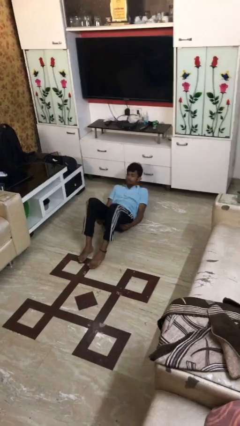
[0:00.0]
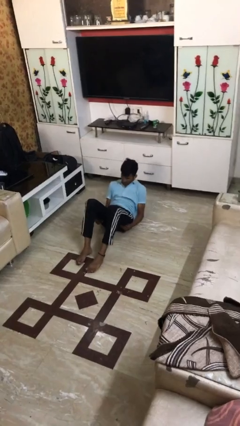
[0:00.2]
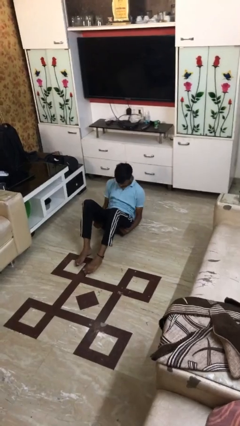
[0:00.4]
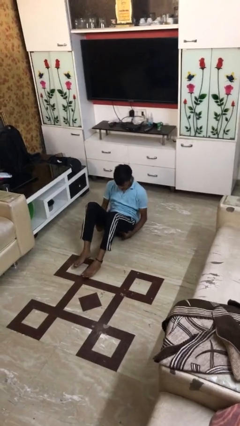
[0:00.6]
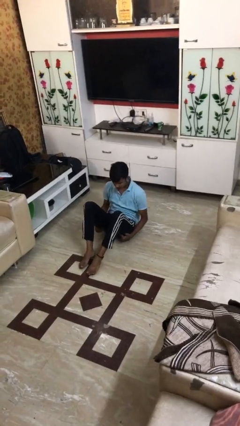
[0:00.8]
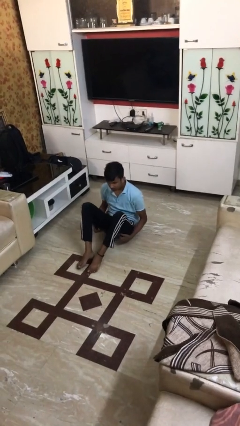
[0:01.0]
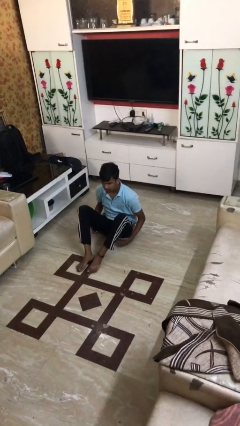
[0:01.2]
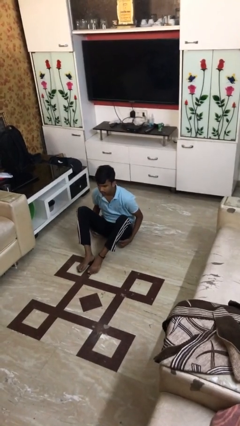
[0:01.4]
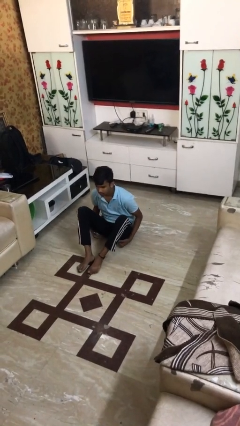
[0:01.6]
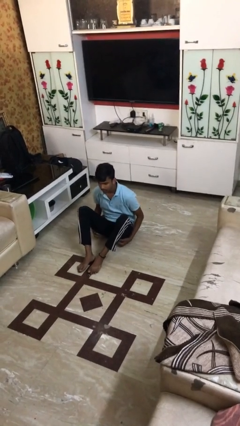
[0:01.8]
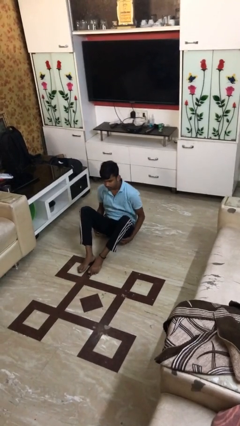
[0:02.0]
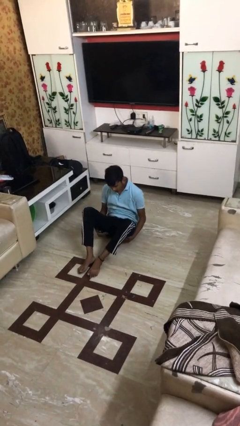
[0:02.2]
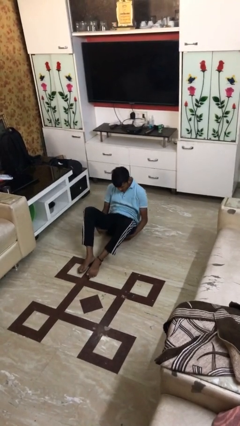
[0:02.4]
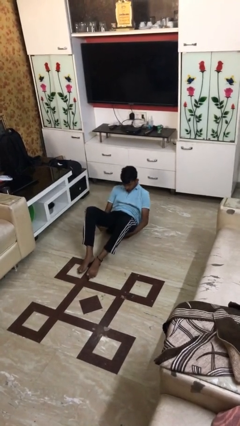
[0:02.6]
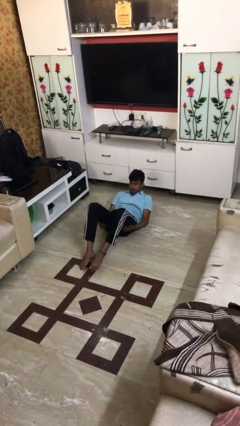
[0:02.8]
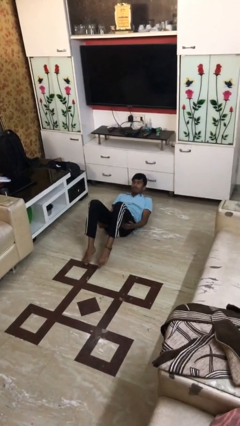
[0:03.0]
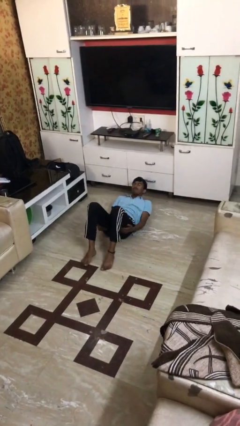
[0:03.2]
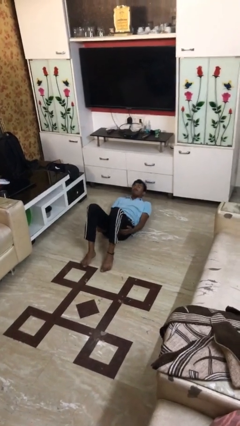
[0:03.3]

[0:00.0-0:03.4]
person exercises with situp

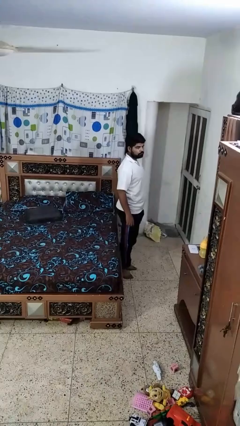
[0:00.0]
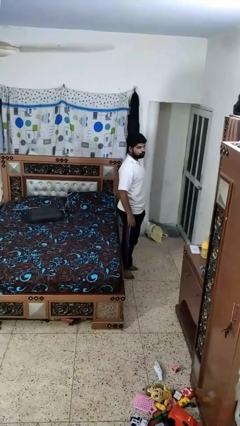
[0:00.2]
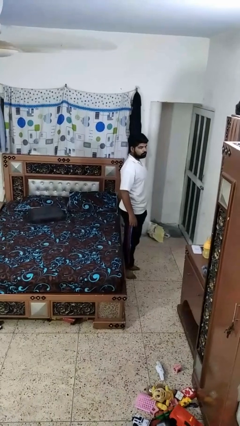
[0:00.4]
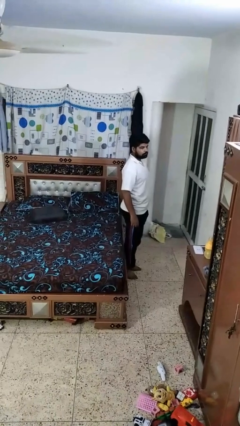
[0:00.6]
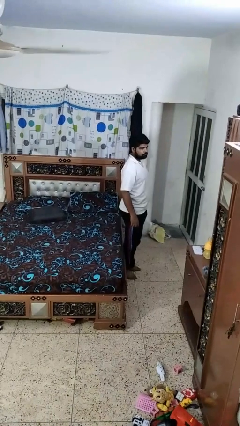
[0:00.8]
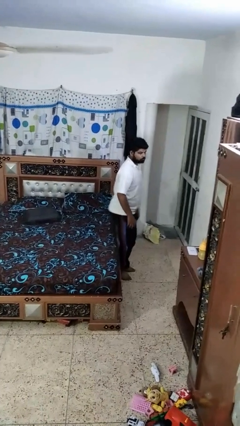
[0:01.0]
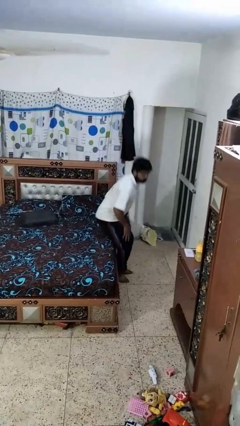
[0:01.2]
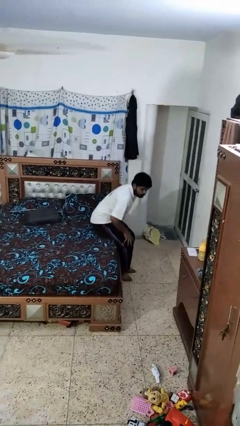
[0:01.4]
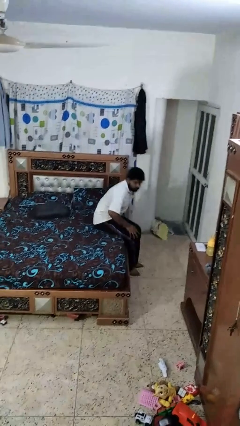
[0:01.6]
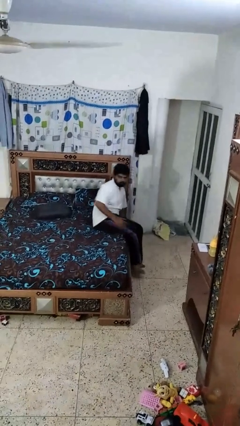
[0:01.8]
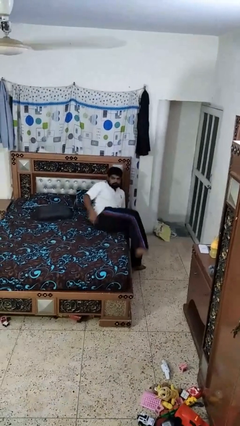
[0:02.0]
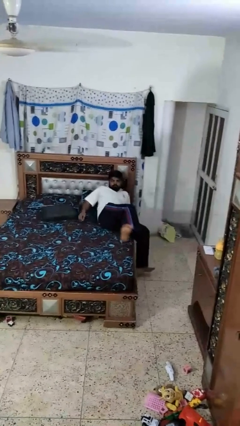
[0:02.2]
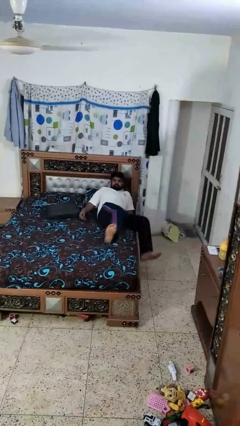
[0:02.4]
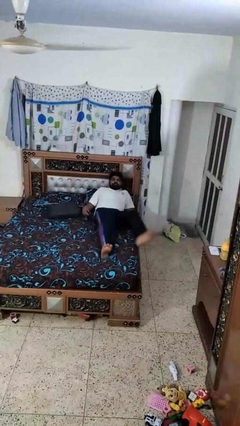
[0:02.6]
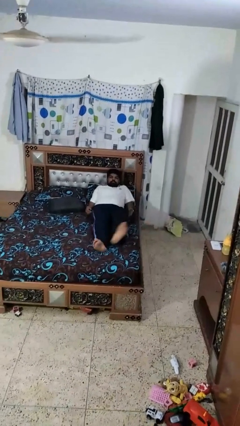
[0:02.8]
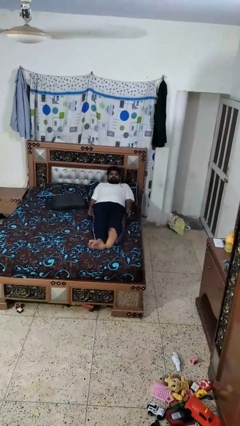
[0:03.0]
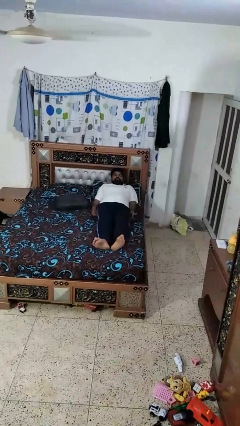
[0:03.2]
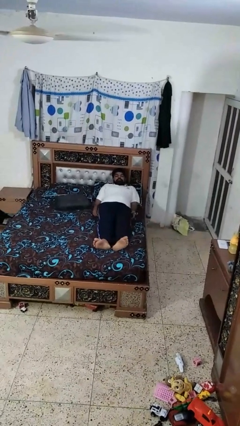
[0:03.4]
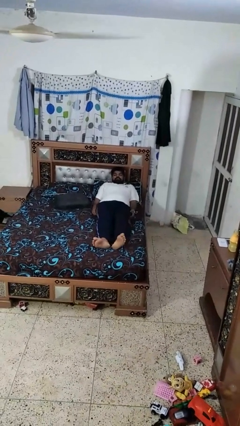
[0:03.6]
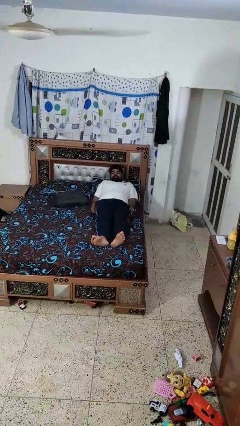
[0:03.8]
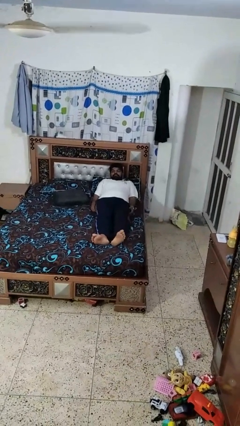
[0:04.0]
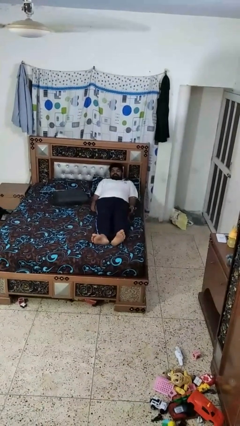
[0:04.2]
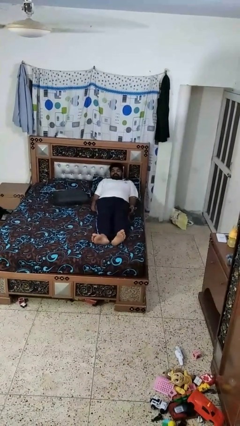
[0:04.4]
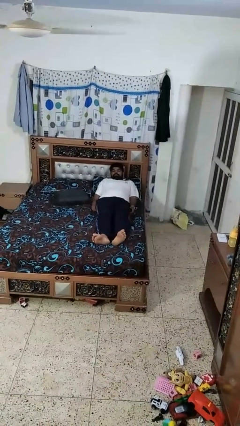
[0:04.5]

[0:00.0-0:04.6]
person lies down on bed

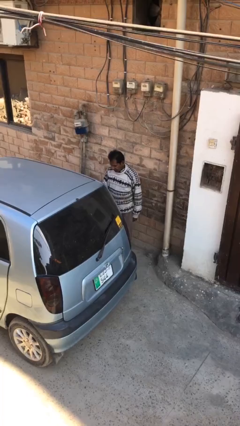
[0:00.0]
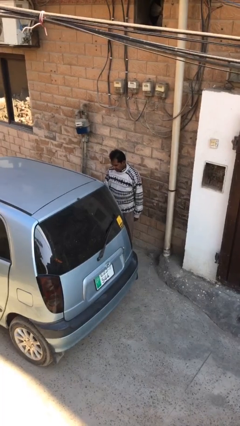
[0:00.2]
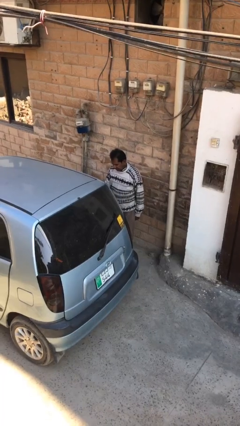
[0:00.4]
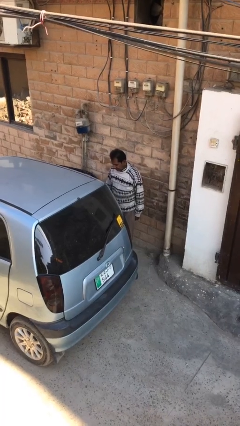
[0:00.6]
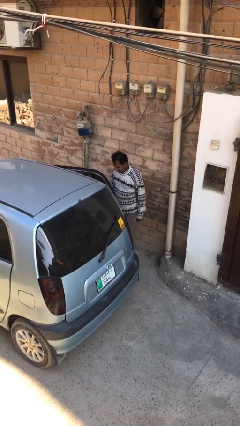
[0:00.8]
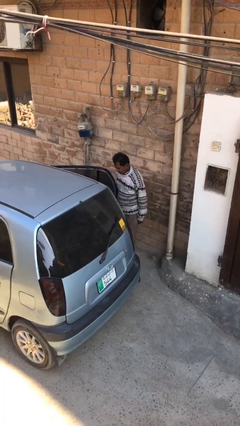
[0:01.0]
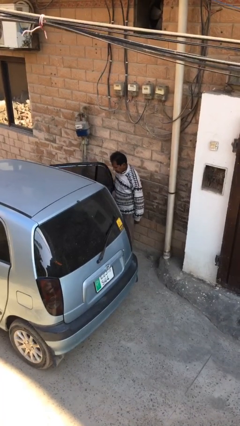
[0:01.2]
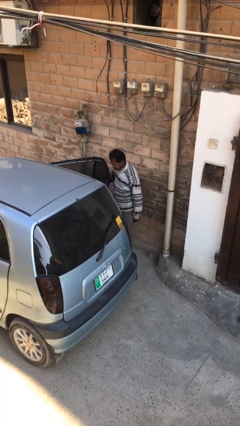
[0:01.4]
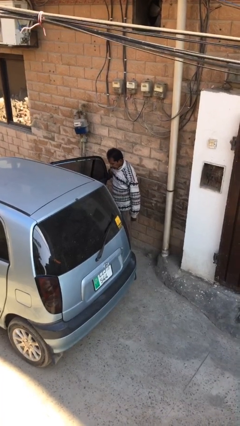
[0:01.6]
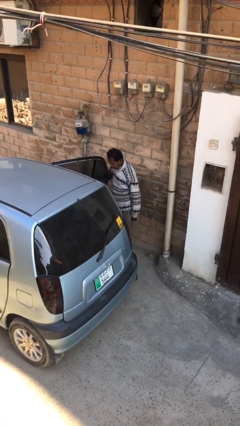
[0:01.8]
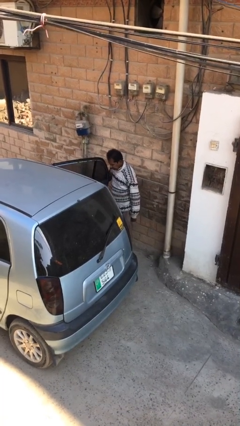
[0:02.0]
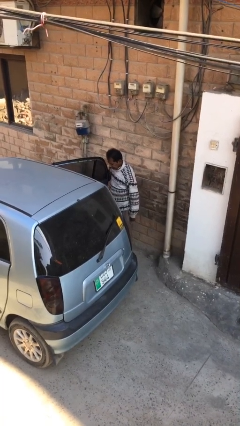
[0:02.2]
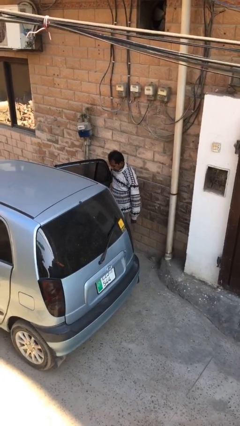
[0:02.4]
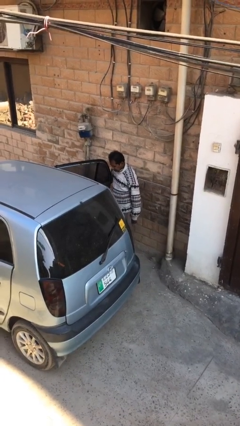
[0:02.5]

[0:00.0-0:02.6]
person opens car door

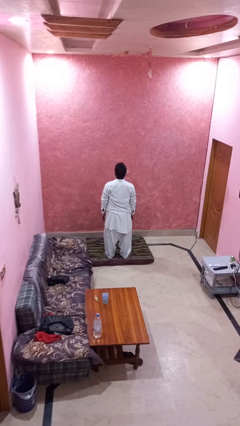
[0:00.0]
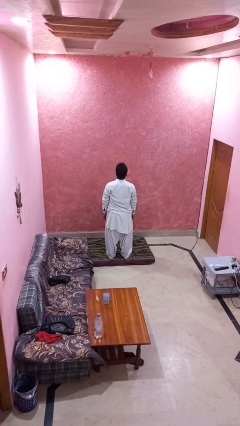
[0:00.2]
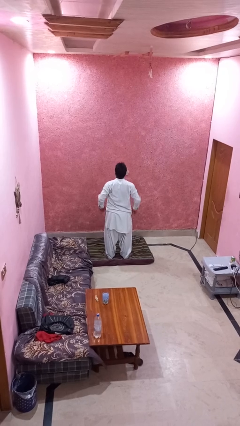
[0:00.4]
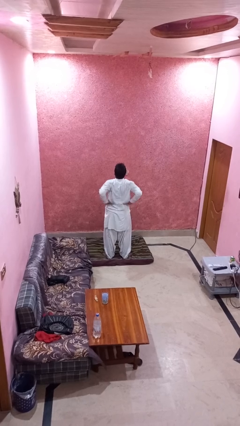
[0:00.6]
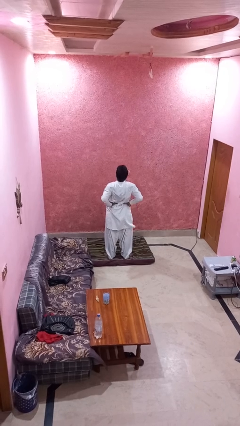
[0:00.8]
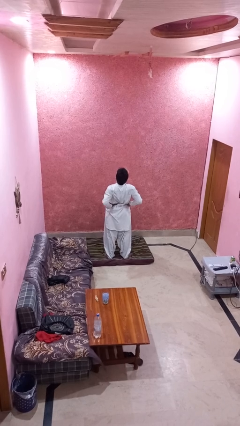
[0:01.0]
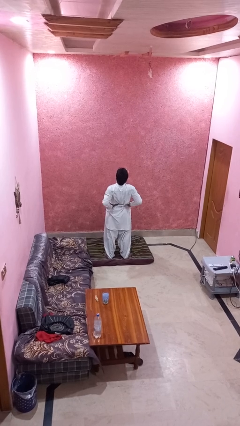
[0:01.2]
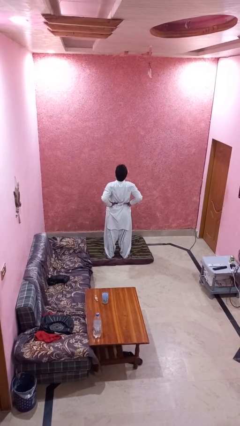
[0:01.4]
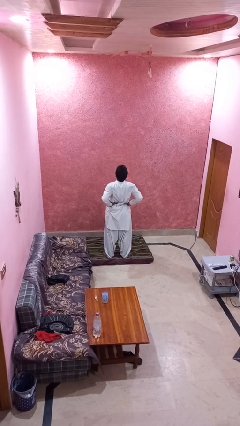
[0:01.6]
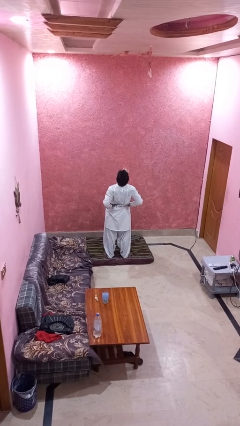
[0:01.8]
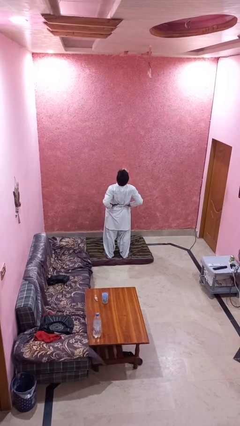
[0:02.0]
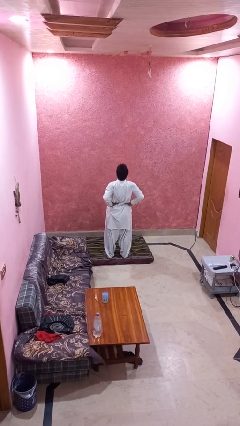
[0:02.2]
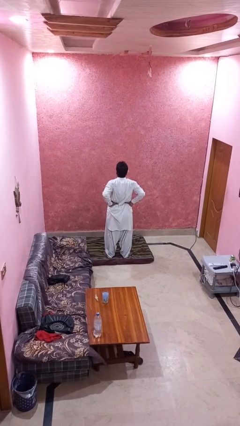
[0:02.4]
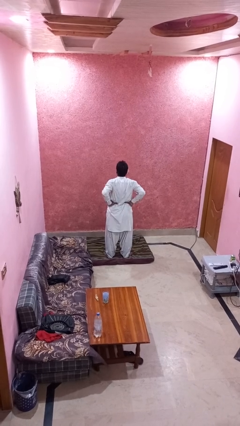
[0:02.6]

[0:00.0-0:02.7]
person stretches back

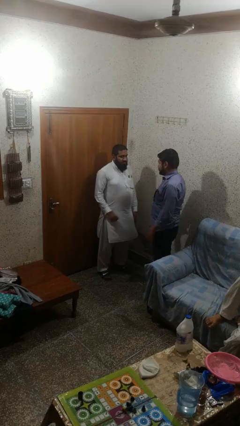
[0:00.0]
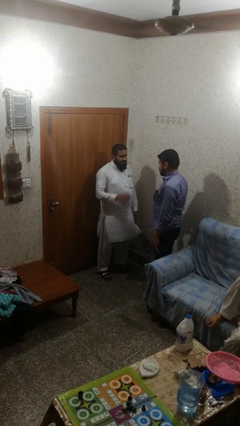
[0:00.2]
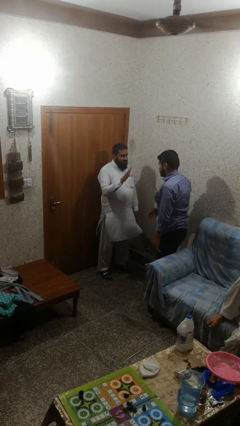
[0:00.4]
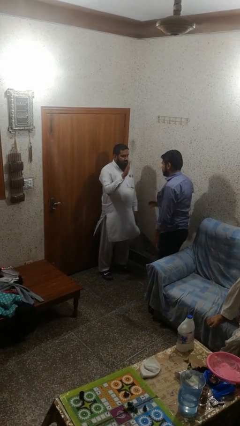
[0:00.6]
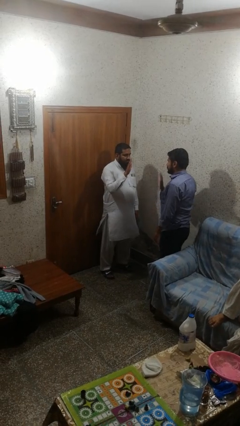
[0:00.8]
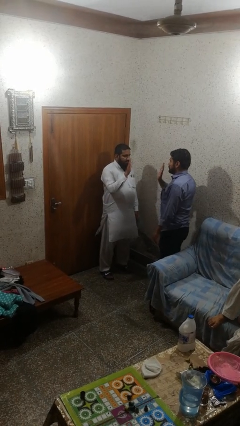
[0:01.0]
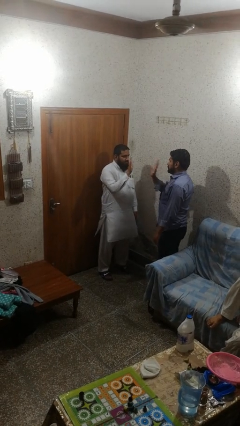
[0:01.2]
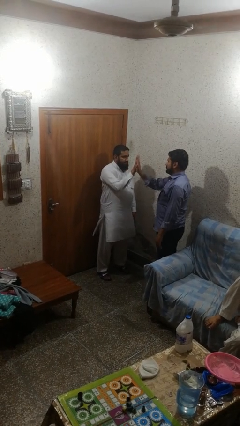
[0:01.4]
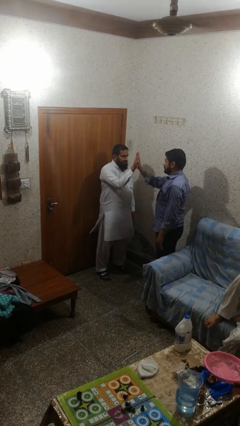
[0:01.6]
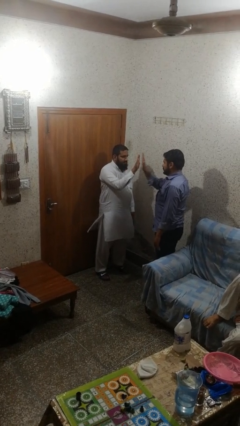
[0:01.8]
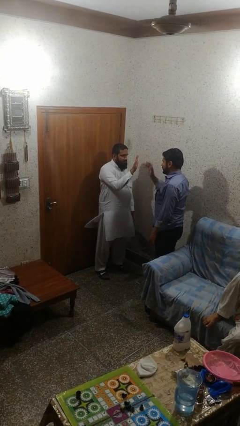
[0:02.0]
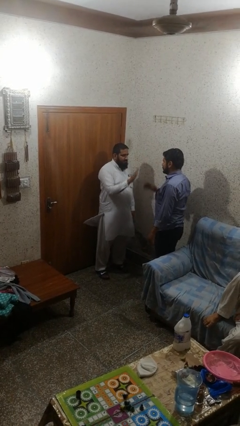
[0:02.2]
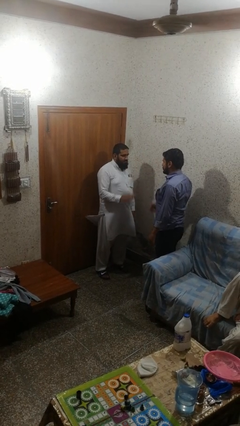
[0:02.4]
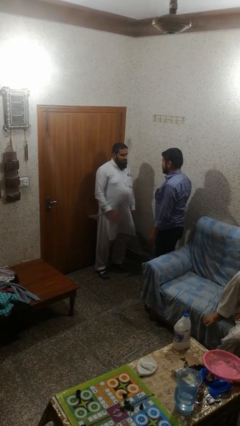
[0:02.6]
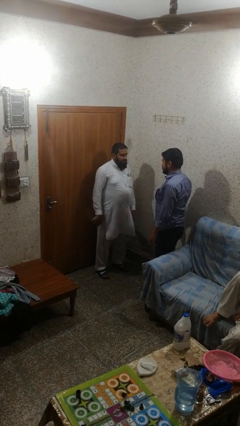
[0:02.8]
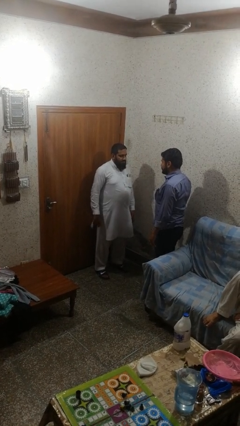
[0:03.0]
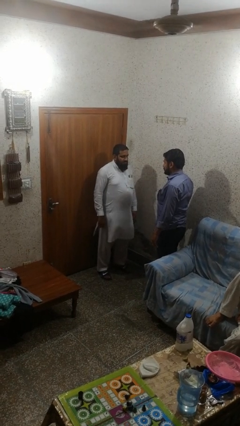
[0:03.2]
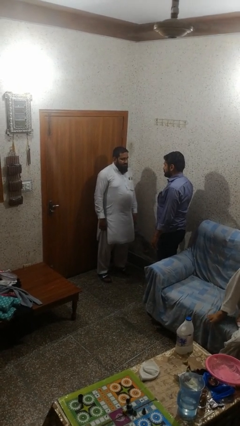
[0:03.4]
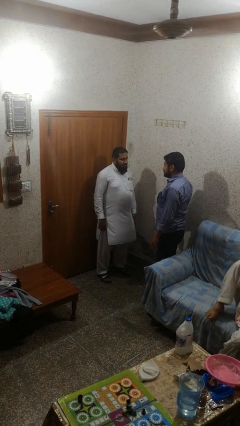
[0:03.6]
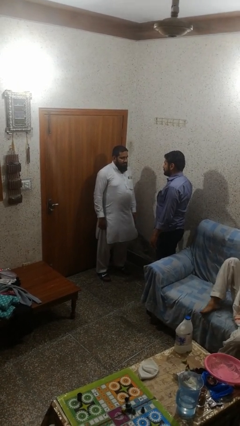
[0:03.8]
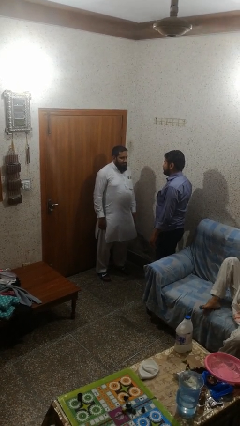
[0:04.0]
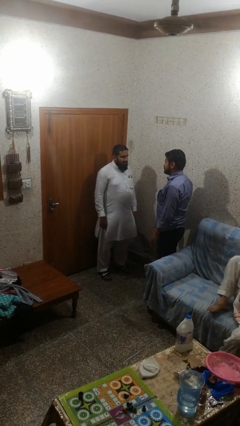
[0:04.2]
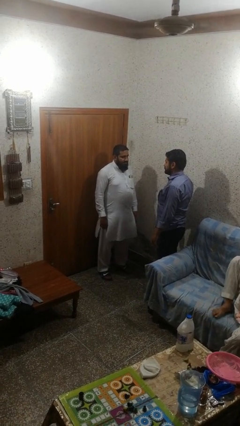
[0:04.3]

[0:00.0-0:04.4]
person highfives hand

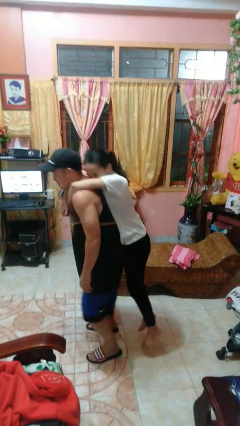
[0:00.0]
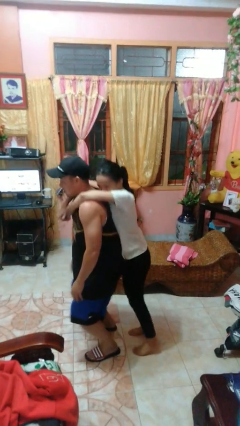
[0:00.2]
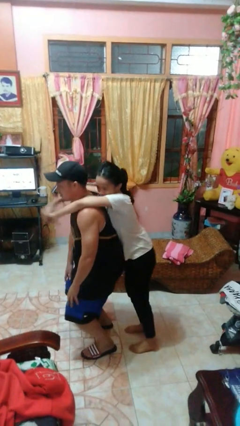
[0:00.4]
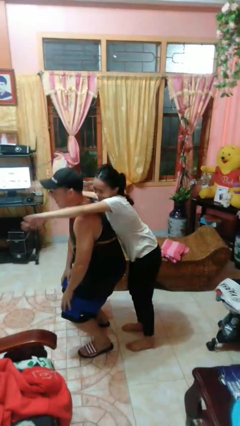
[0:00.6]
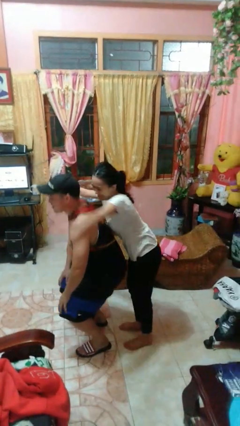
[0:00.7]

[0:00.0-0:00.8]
person puts down person
